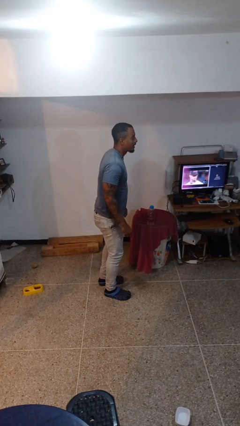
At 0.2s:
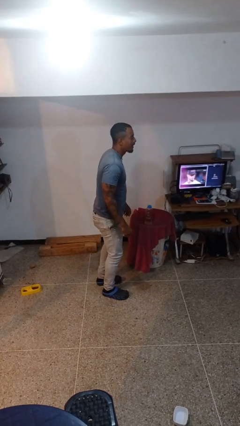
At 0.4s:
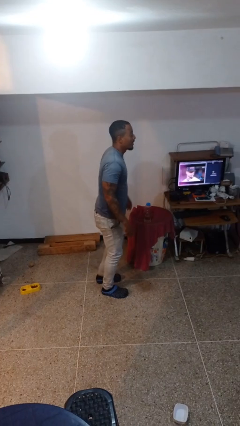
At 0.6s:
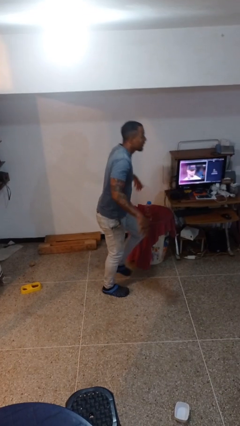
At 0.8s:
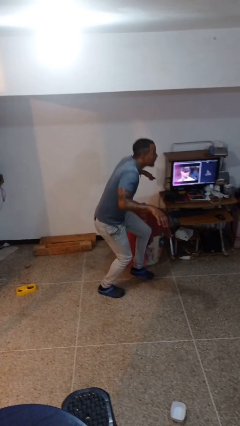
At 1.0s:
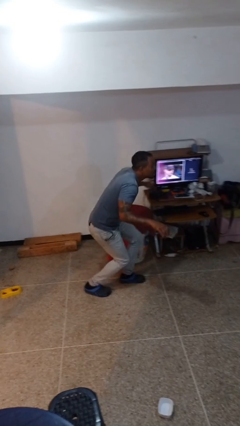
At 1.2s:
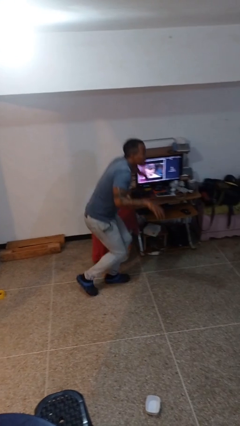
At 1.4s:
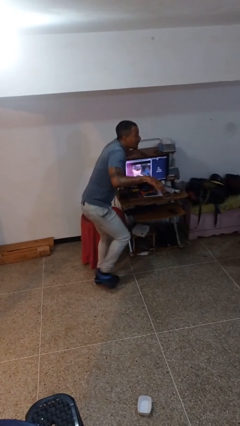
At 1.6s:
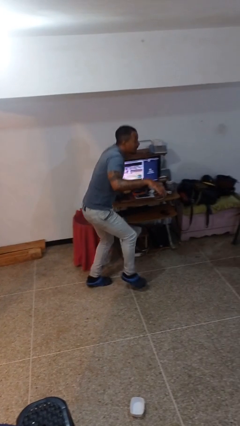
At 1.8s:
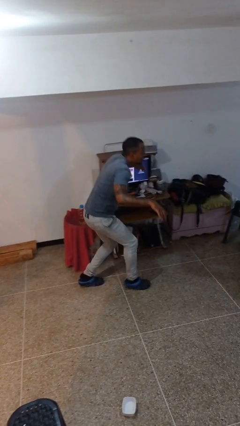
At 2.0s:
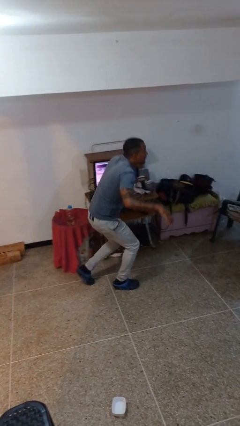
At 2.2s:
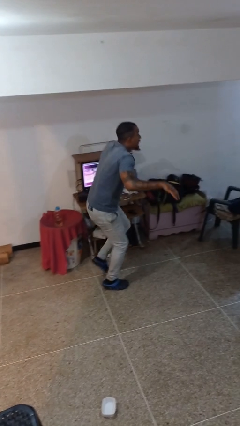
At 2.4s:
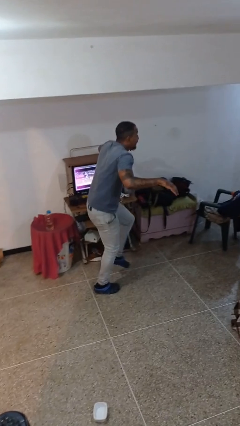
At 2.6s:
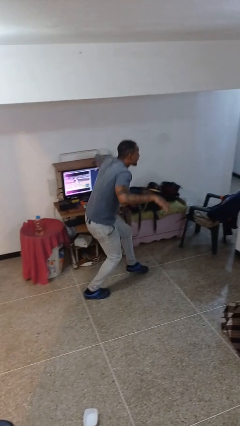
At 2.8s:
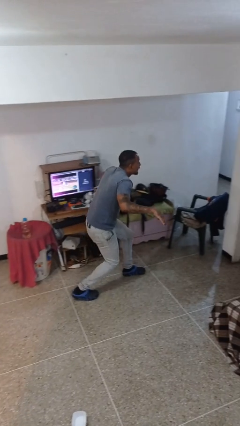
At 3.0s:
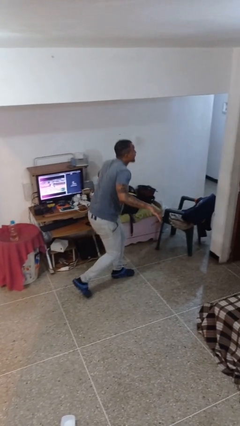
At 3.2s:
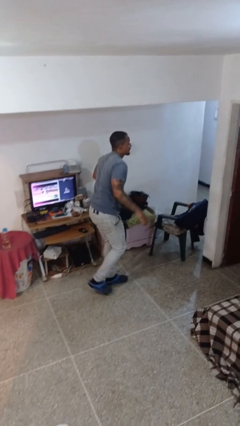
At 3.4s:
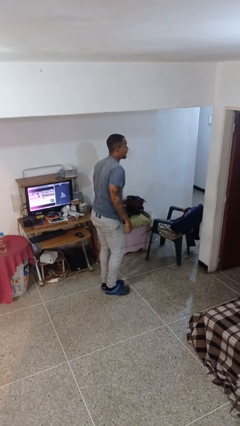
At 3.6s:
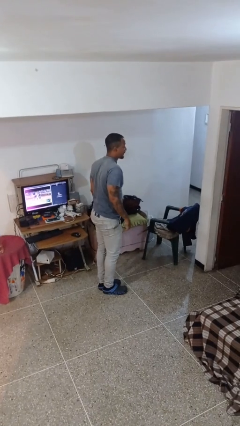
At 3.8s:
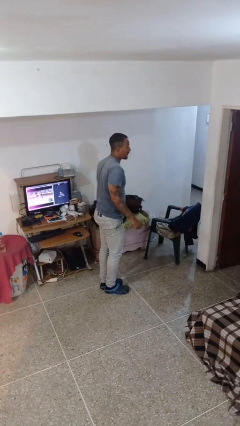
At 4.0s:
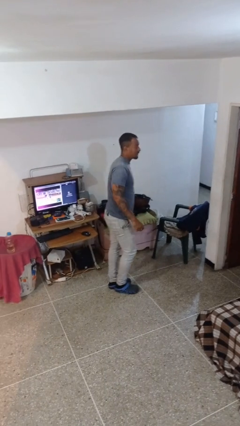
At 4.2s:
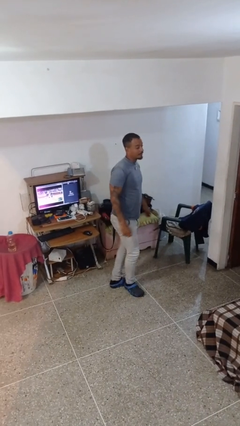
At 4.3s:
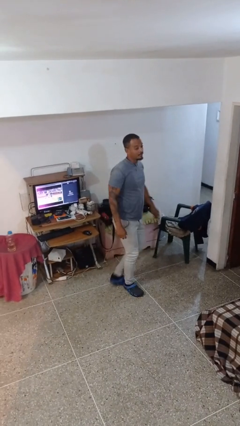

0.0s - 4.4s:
person walks tiptoe

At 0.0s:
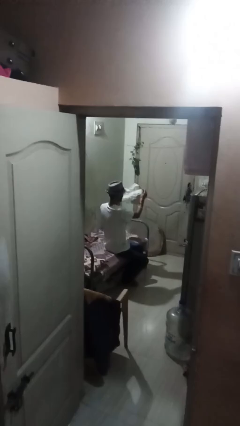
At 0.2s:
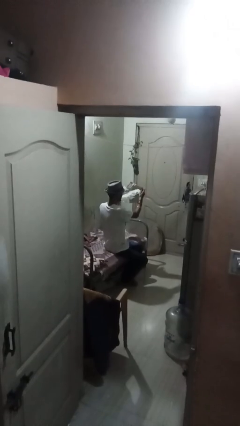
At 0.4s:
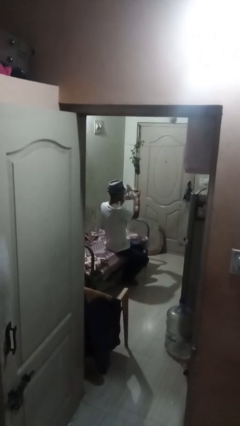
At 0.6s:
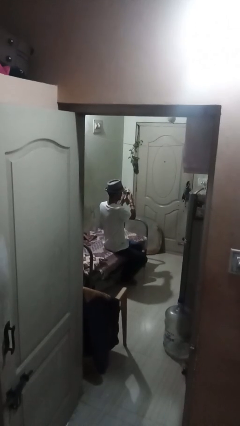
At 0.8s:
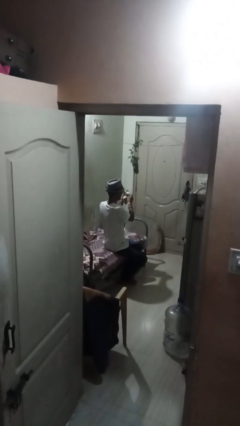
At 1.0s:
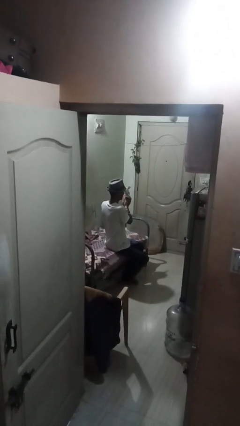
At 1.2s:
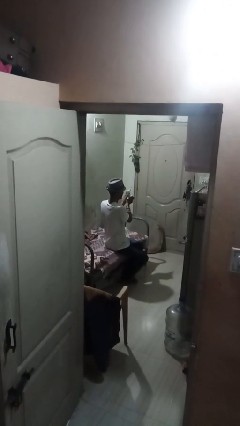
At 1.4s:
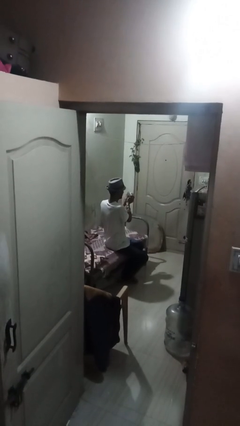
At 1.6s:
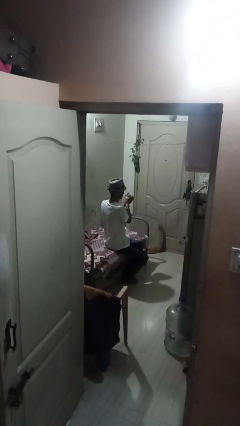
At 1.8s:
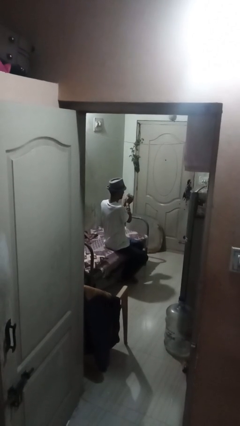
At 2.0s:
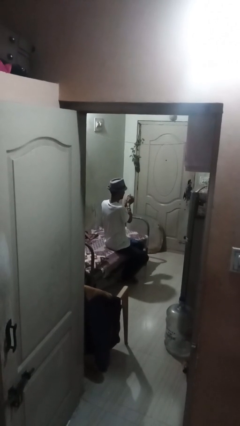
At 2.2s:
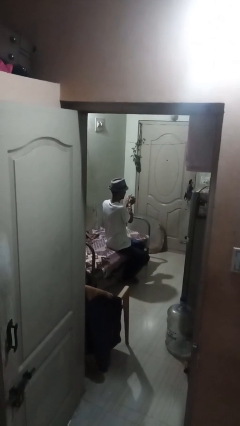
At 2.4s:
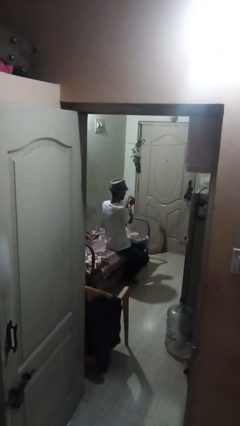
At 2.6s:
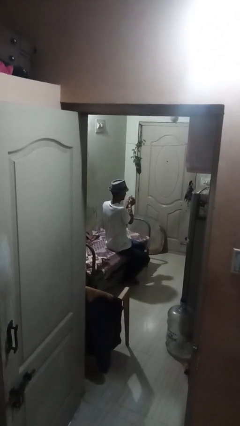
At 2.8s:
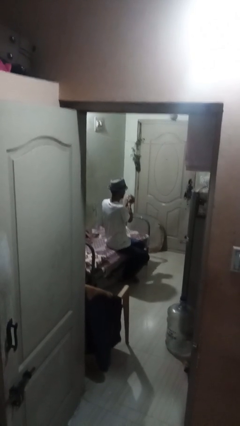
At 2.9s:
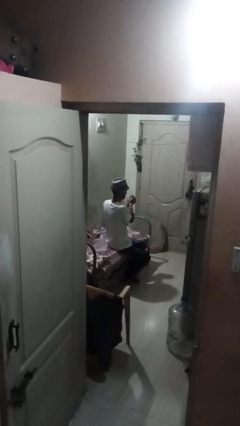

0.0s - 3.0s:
person crumples paper

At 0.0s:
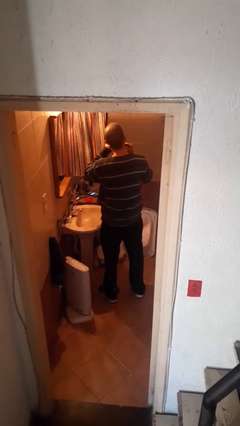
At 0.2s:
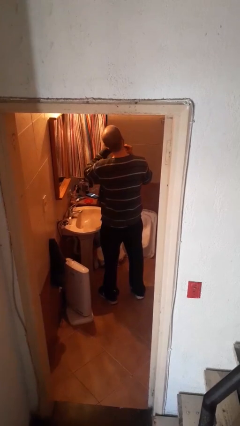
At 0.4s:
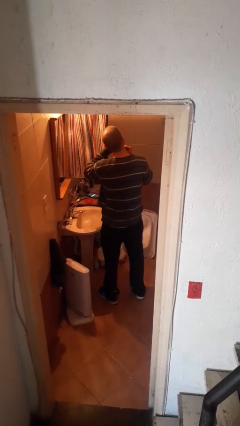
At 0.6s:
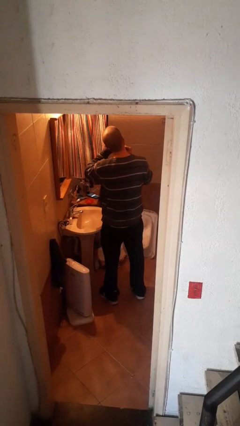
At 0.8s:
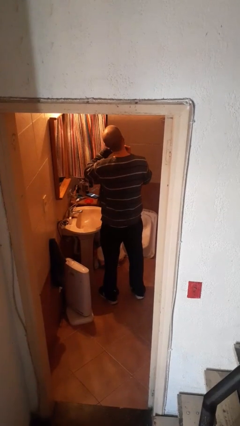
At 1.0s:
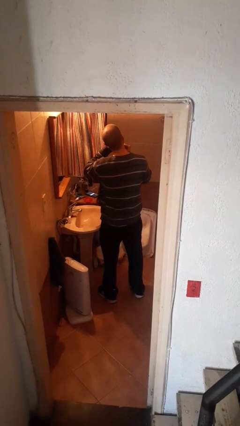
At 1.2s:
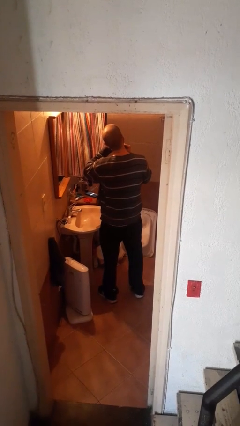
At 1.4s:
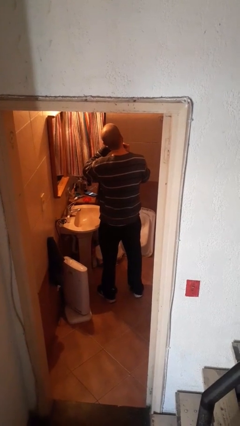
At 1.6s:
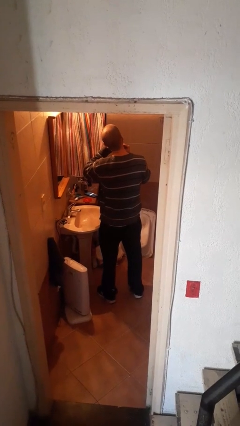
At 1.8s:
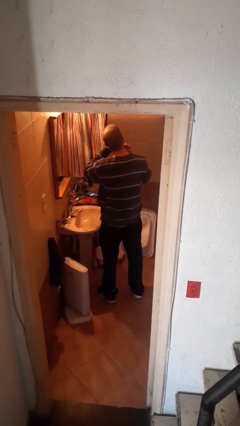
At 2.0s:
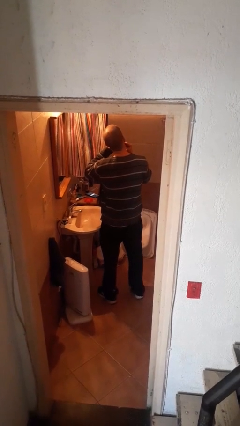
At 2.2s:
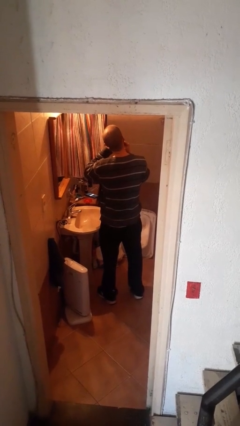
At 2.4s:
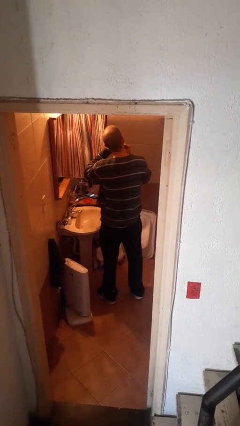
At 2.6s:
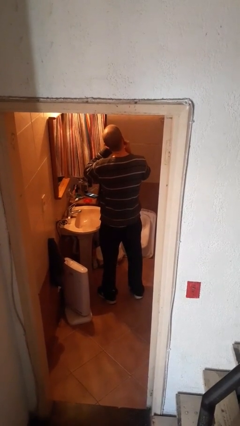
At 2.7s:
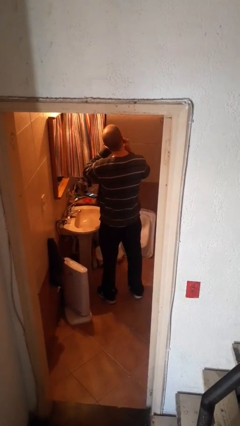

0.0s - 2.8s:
person flosses

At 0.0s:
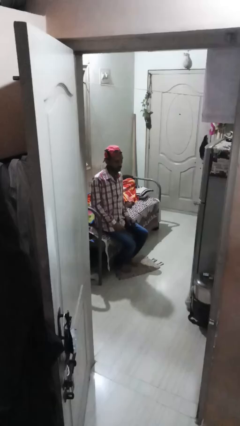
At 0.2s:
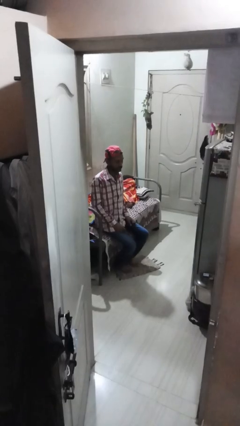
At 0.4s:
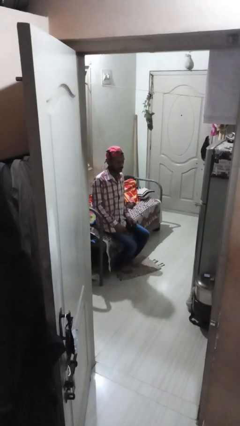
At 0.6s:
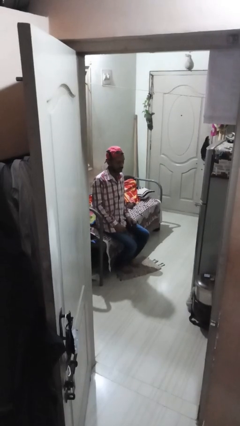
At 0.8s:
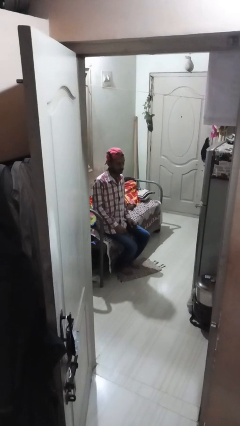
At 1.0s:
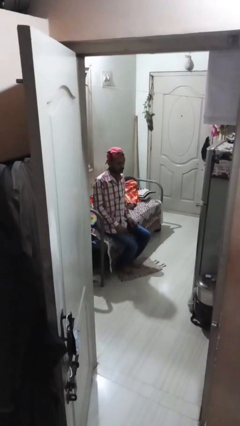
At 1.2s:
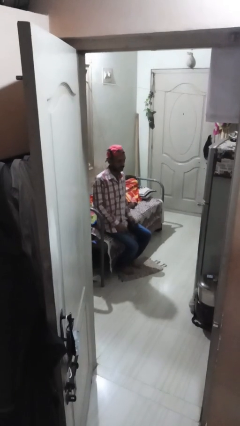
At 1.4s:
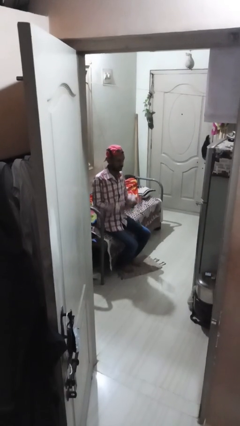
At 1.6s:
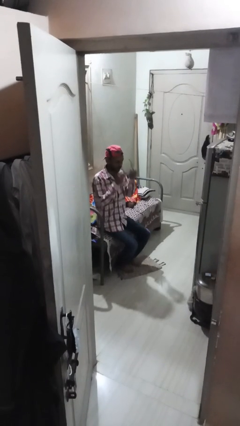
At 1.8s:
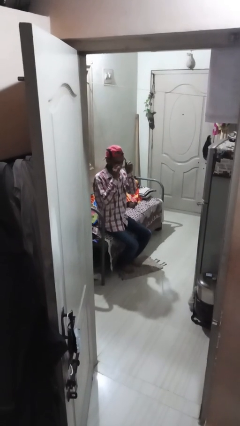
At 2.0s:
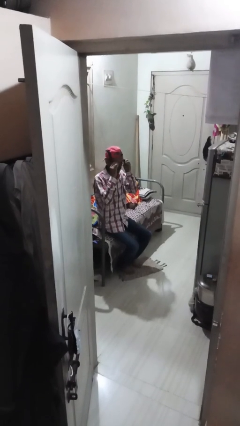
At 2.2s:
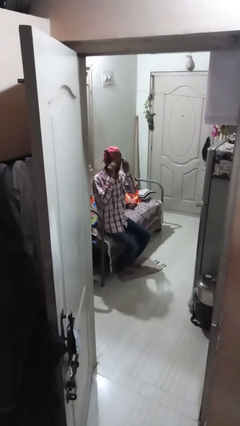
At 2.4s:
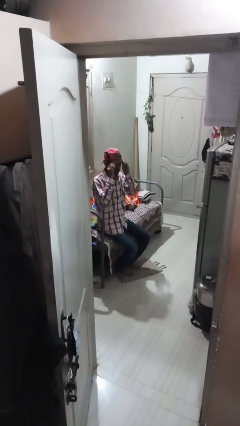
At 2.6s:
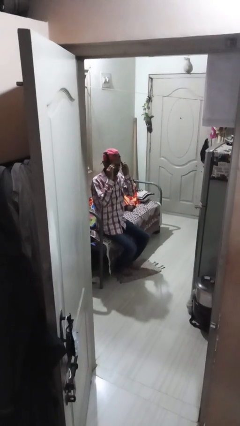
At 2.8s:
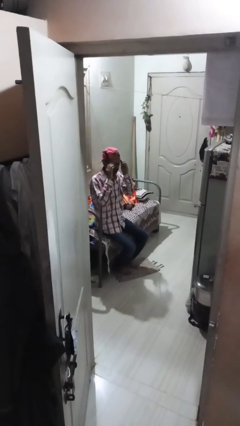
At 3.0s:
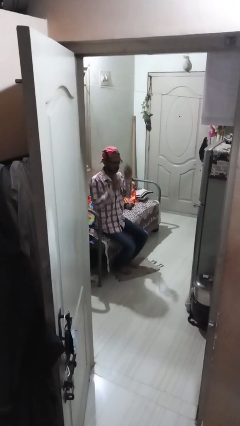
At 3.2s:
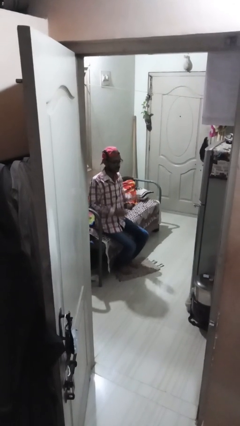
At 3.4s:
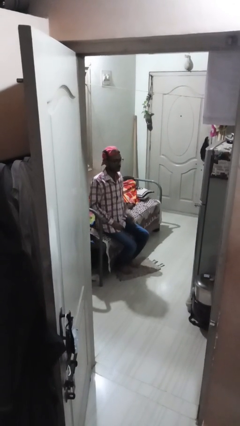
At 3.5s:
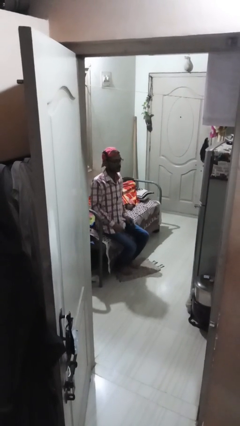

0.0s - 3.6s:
person puts on glasses

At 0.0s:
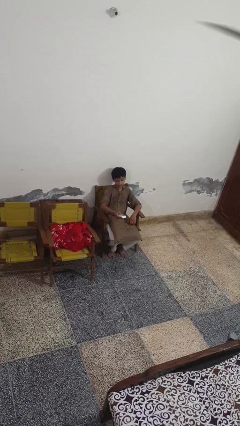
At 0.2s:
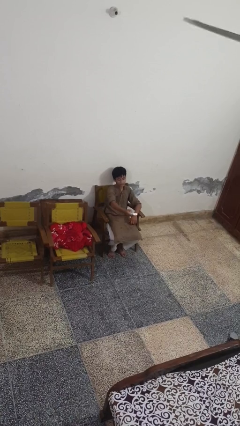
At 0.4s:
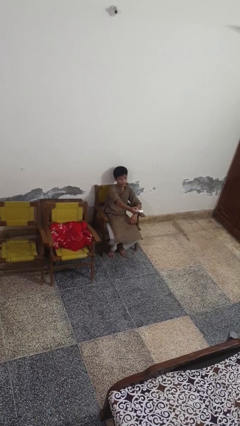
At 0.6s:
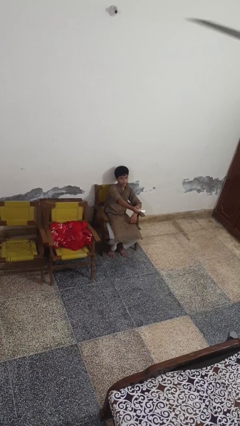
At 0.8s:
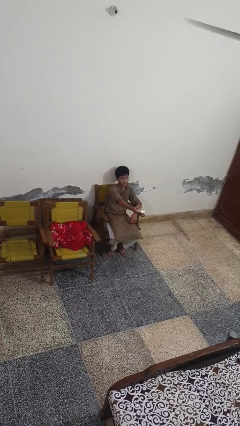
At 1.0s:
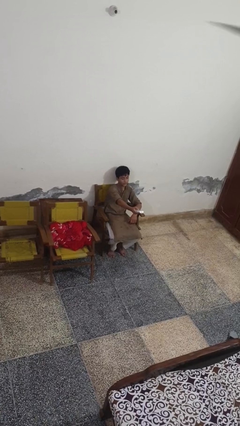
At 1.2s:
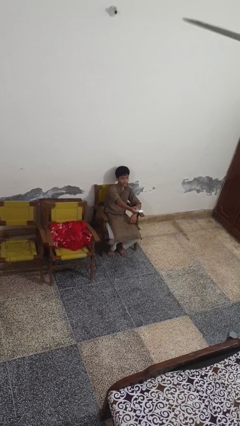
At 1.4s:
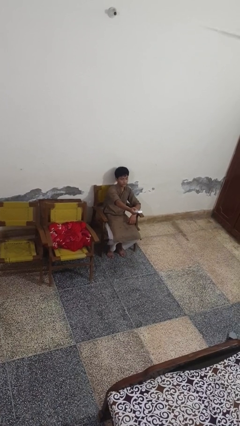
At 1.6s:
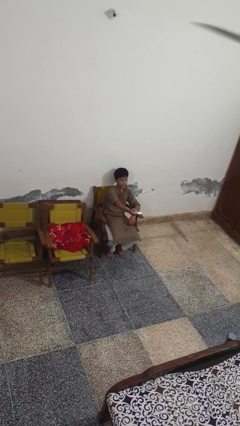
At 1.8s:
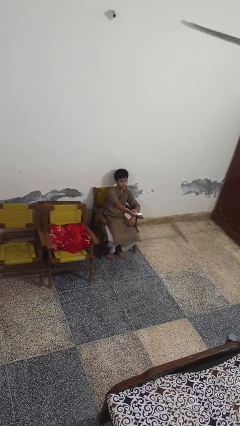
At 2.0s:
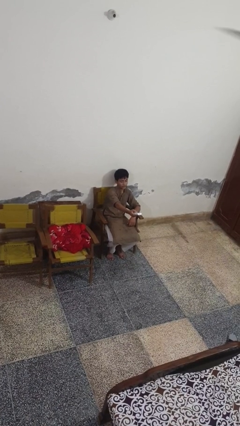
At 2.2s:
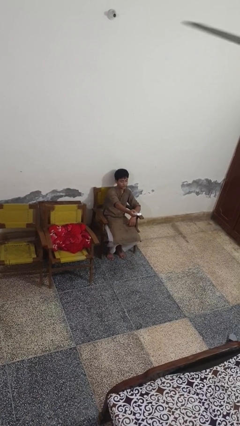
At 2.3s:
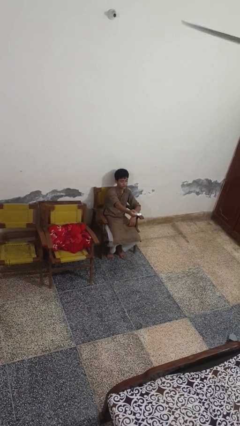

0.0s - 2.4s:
person uses television remote

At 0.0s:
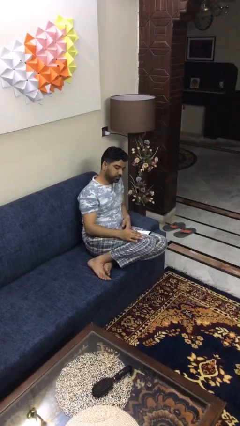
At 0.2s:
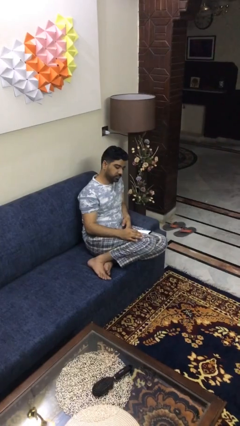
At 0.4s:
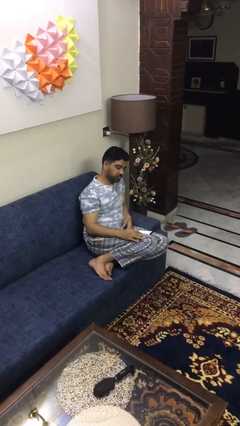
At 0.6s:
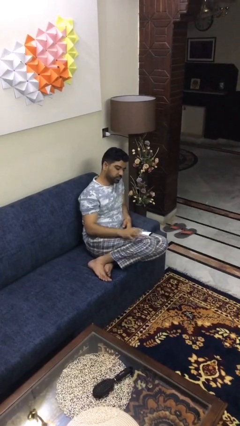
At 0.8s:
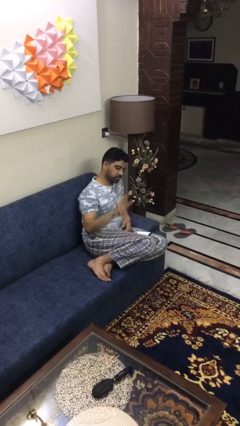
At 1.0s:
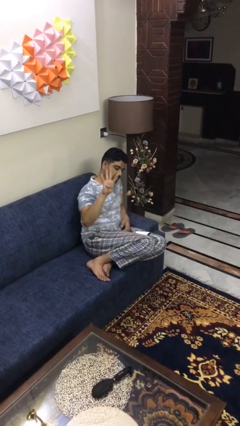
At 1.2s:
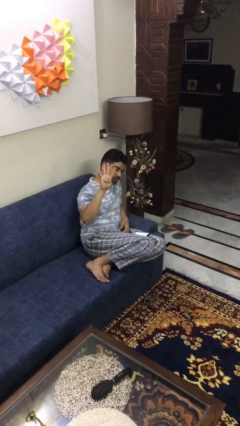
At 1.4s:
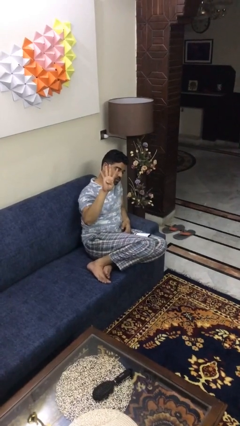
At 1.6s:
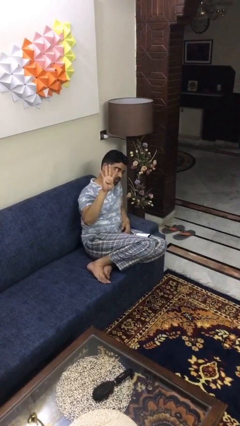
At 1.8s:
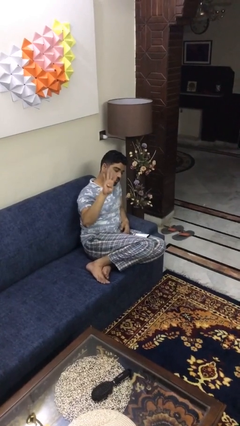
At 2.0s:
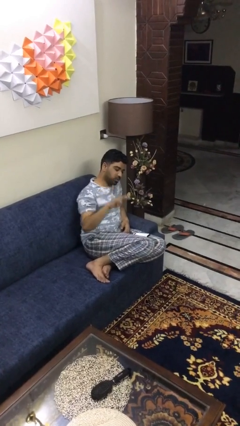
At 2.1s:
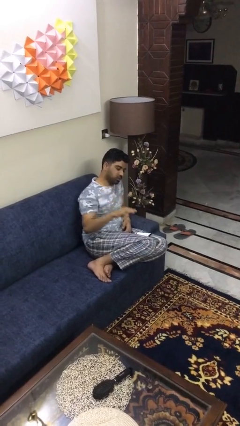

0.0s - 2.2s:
person gestures number four
